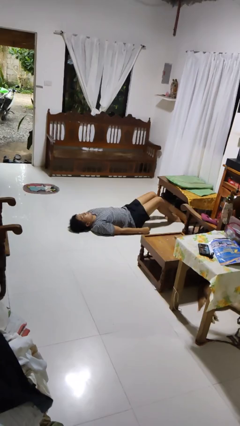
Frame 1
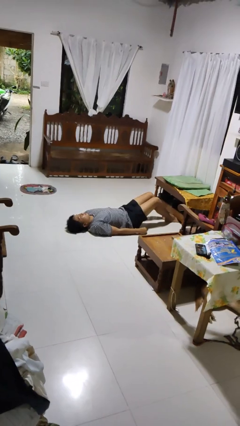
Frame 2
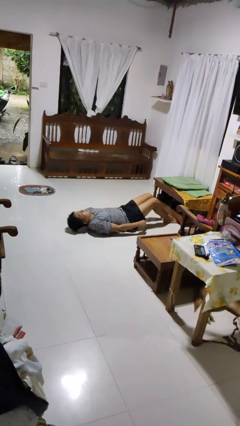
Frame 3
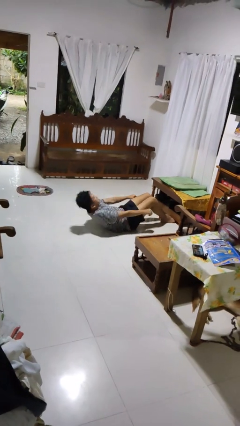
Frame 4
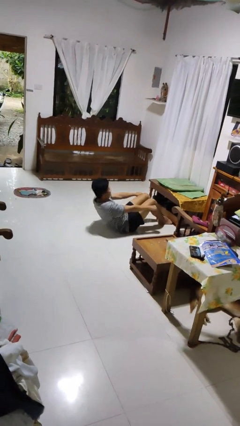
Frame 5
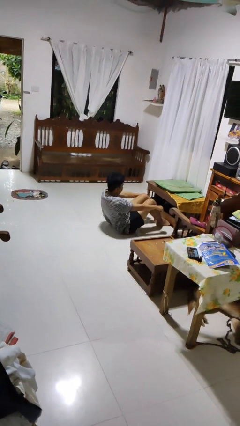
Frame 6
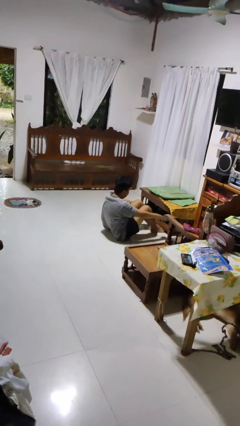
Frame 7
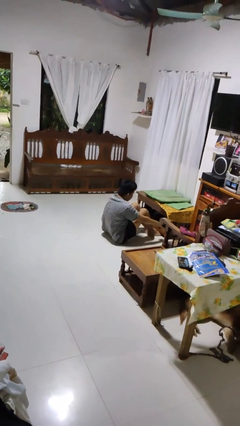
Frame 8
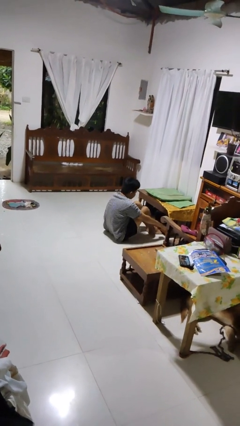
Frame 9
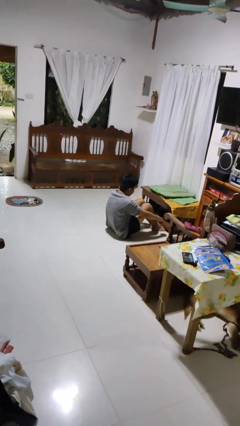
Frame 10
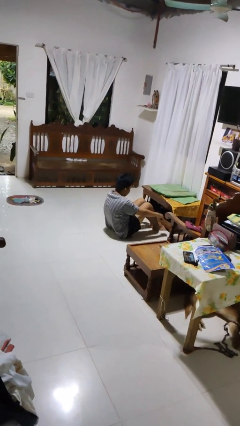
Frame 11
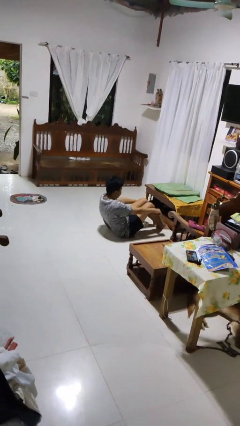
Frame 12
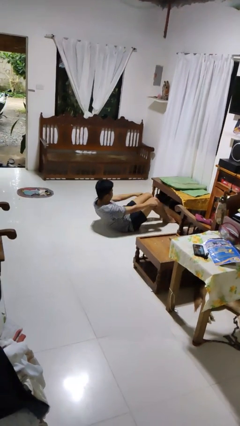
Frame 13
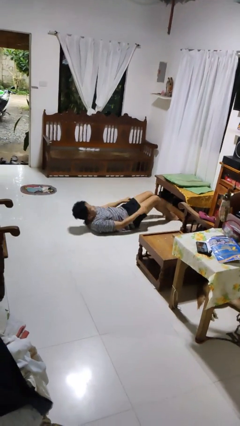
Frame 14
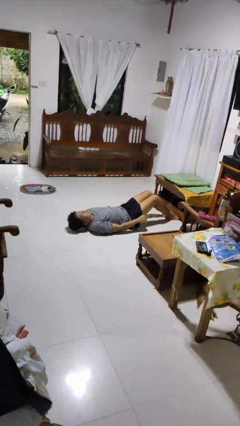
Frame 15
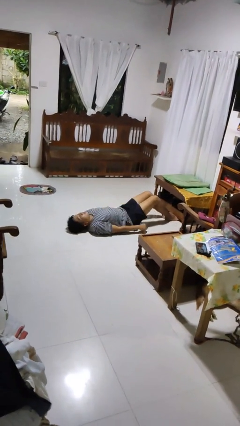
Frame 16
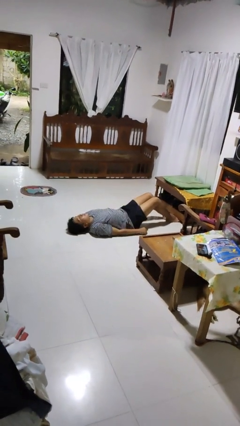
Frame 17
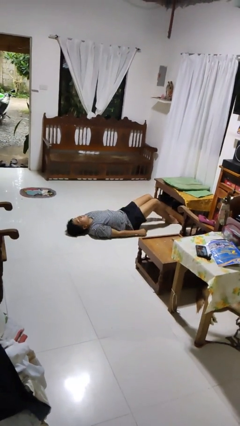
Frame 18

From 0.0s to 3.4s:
person exercises with situp

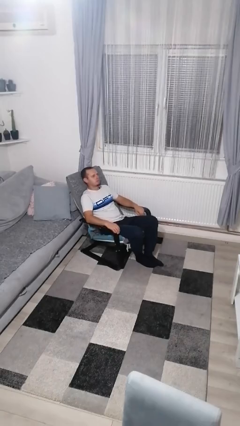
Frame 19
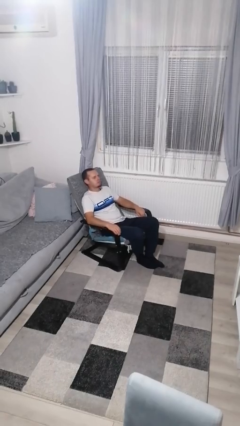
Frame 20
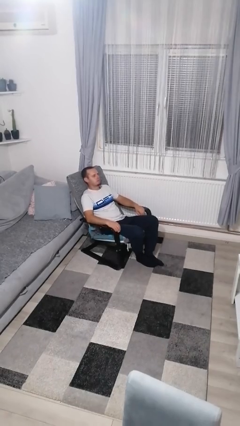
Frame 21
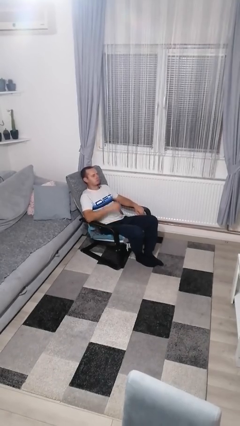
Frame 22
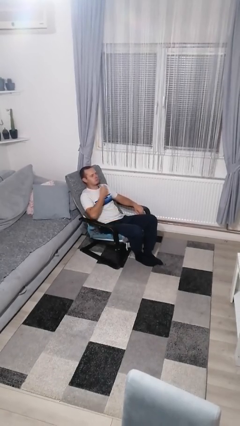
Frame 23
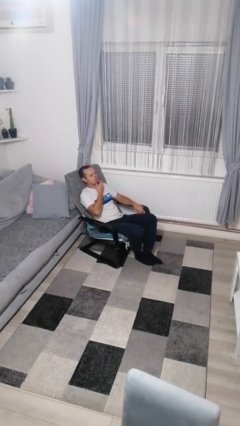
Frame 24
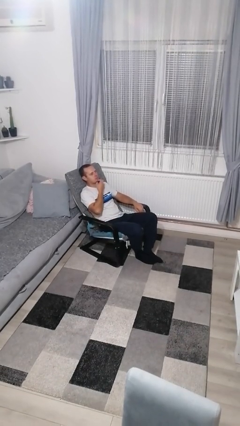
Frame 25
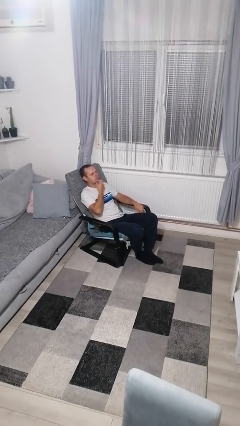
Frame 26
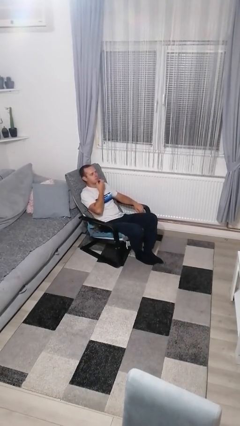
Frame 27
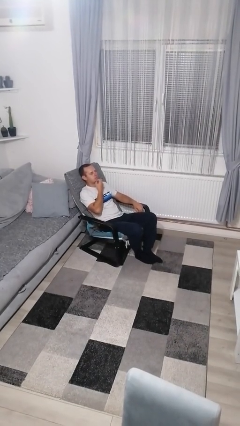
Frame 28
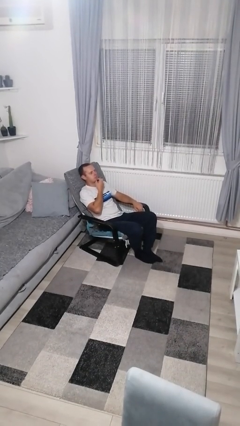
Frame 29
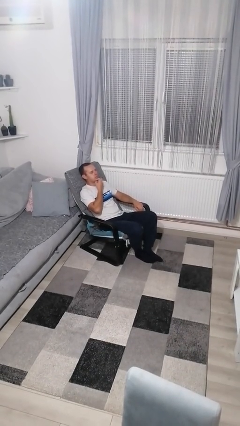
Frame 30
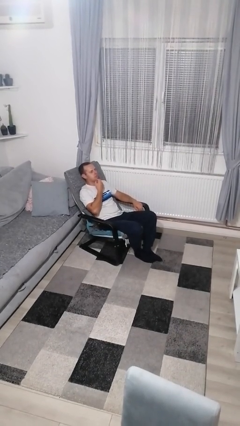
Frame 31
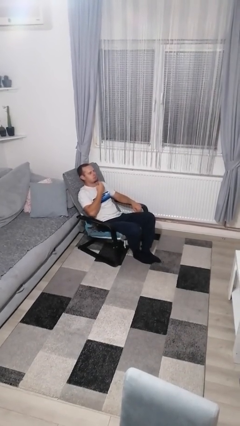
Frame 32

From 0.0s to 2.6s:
person strokes chin

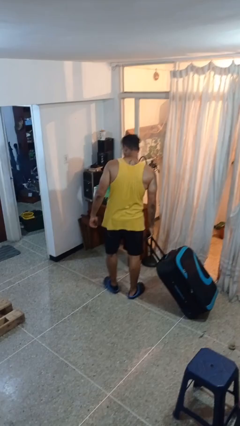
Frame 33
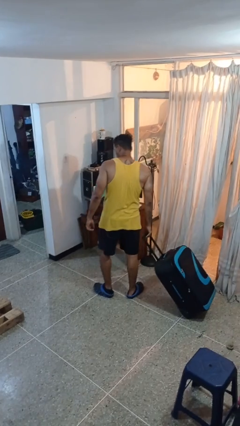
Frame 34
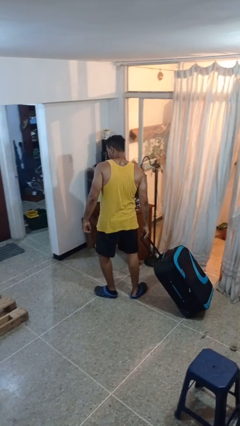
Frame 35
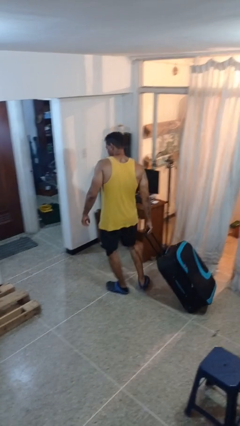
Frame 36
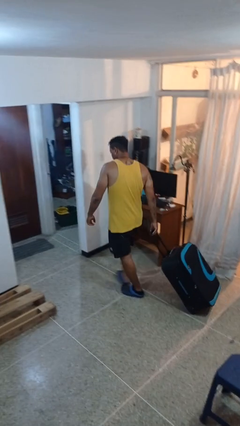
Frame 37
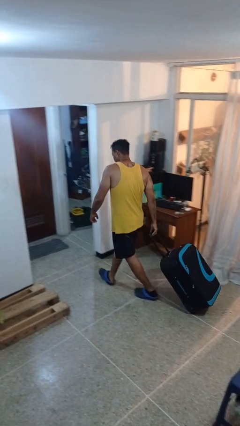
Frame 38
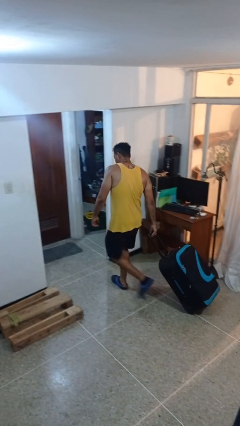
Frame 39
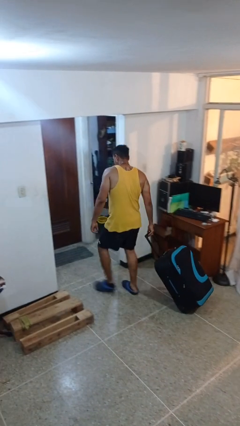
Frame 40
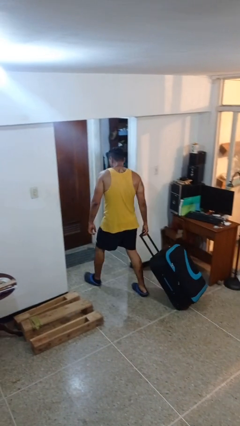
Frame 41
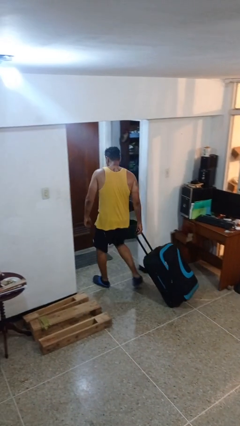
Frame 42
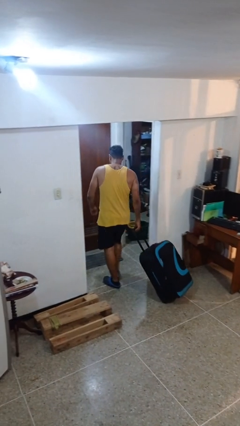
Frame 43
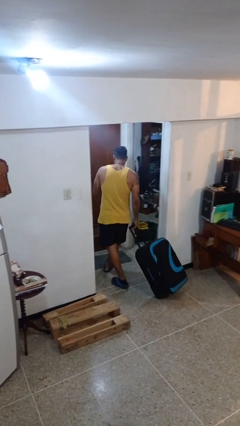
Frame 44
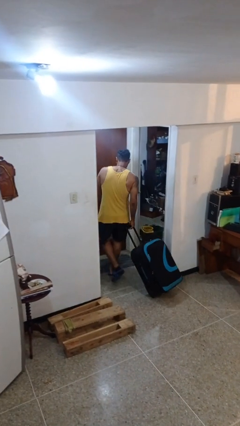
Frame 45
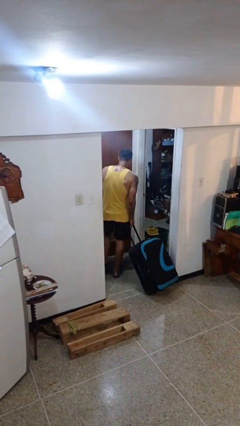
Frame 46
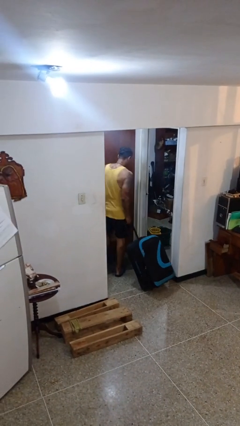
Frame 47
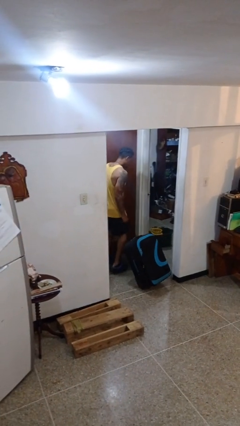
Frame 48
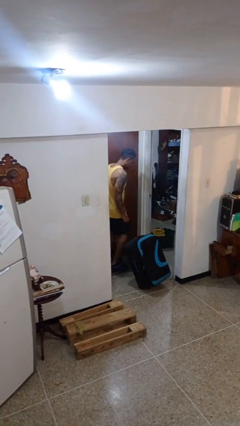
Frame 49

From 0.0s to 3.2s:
person pulls wheeled cart

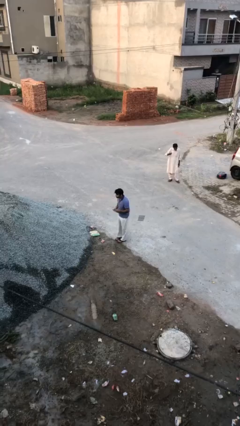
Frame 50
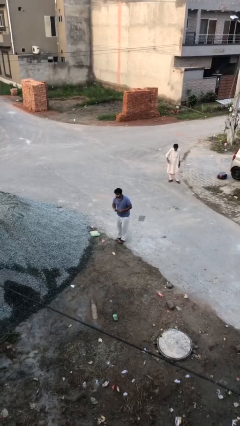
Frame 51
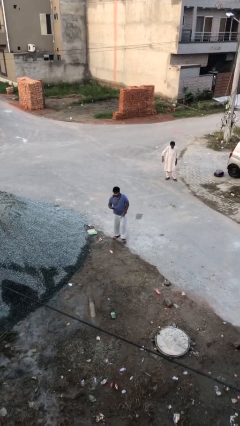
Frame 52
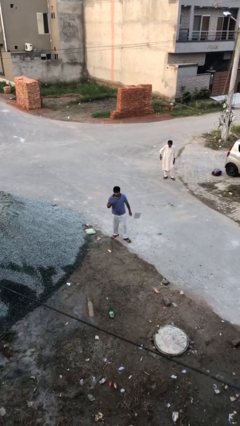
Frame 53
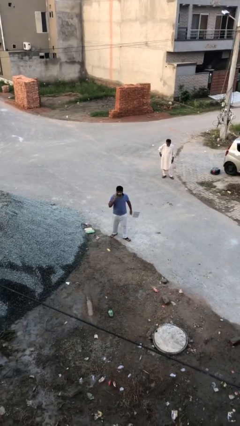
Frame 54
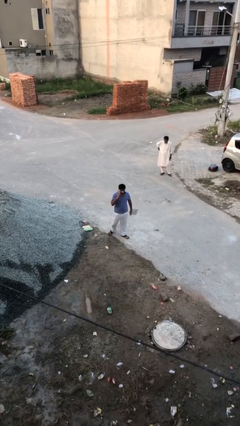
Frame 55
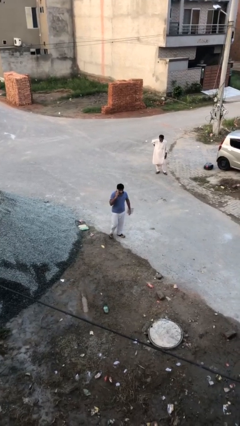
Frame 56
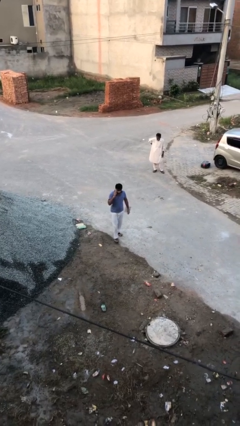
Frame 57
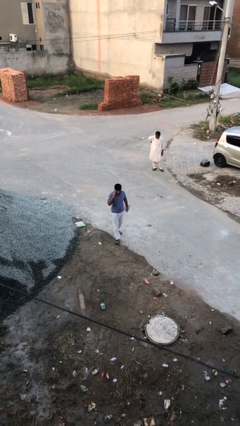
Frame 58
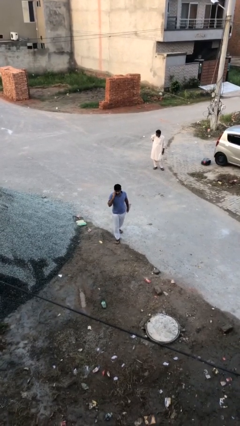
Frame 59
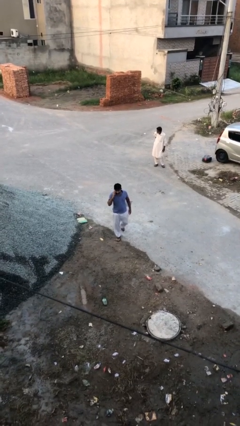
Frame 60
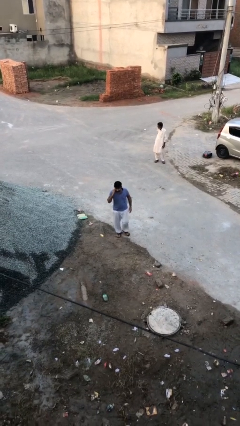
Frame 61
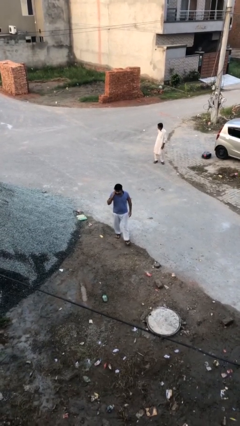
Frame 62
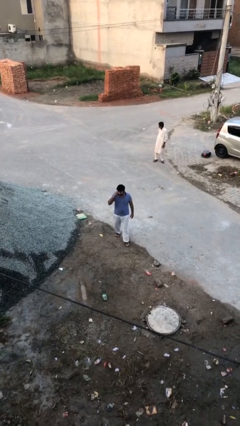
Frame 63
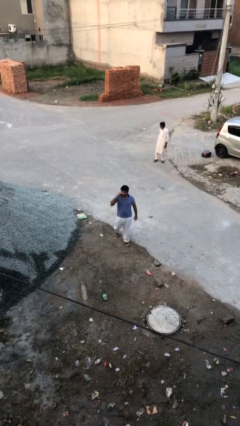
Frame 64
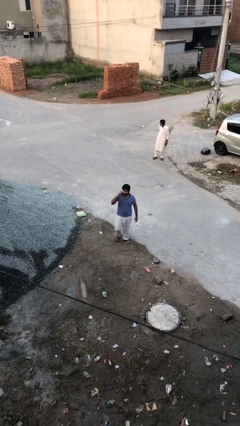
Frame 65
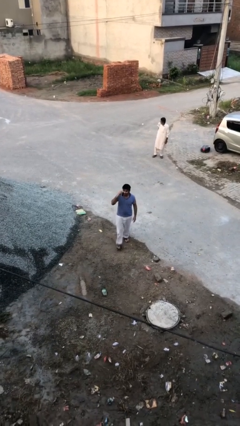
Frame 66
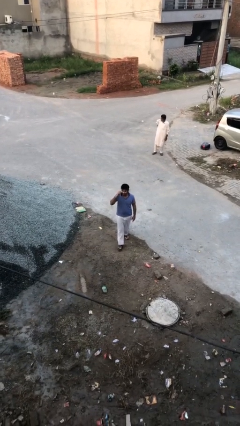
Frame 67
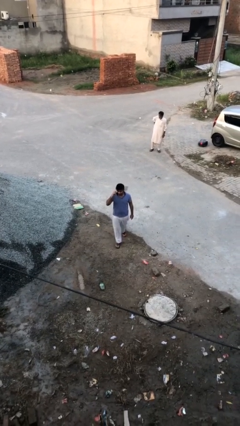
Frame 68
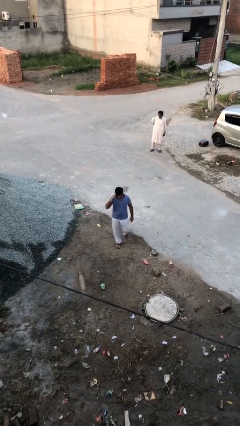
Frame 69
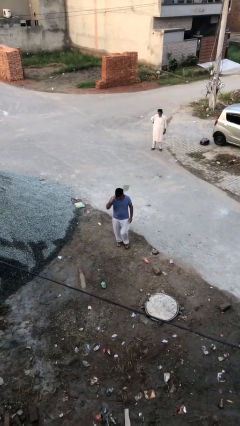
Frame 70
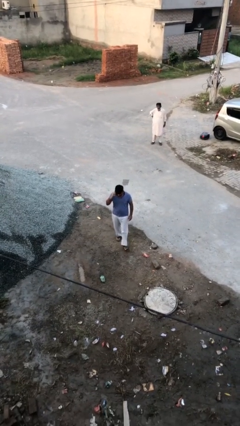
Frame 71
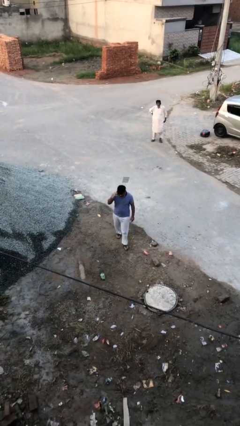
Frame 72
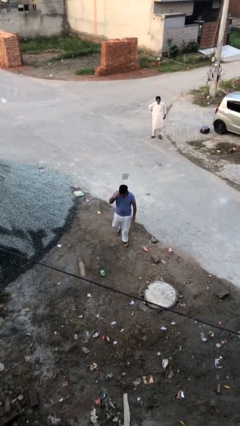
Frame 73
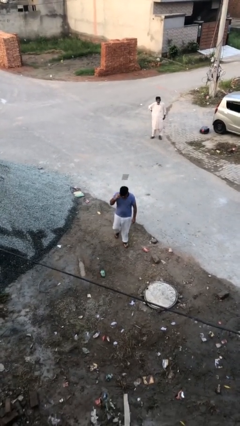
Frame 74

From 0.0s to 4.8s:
person talks on phone

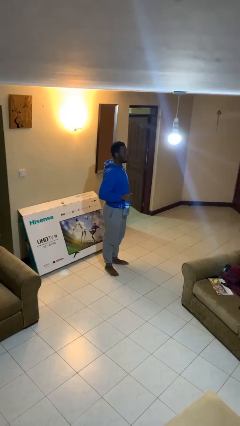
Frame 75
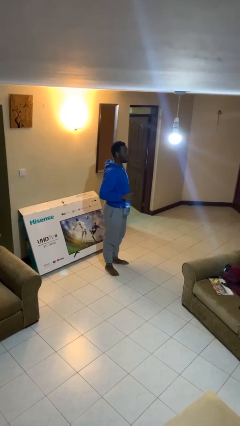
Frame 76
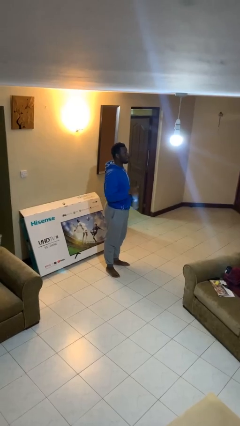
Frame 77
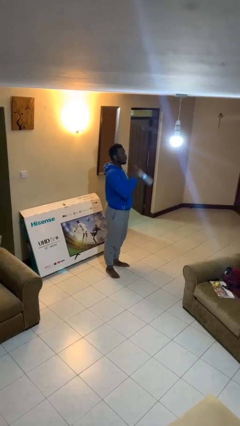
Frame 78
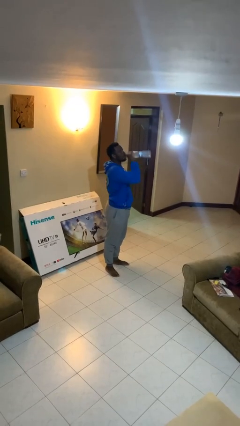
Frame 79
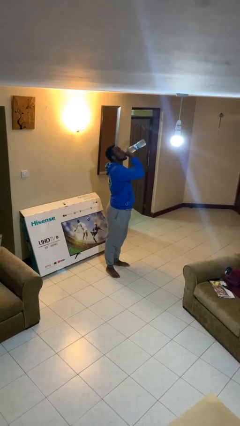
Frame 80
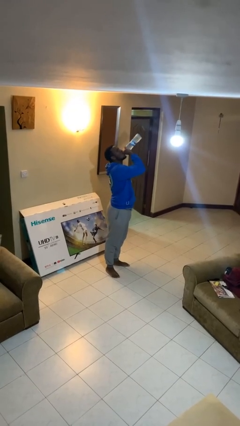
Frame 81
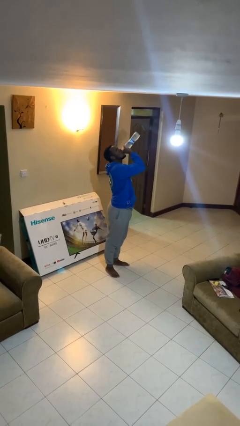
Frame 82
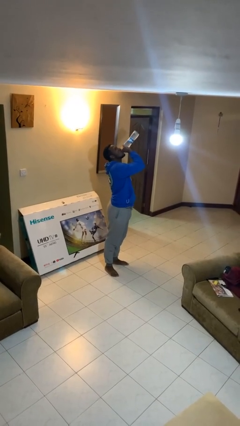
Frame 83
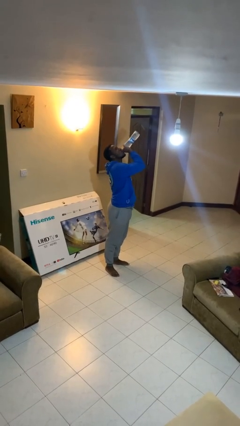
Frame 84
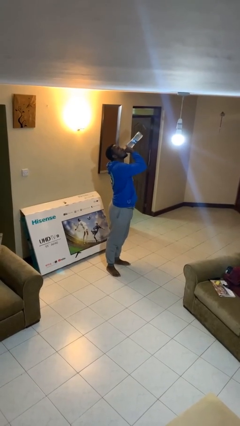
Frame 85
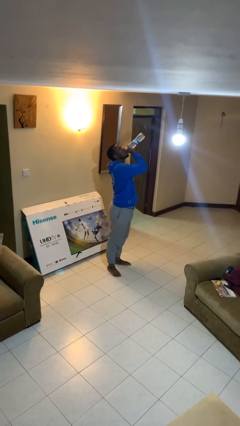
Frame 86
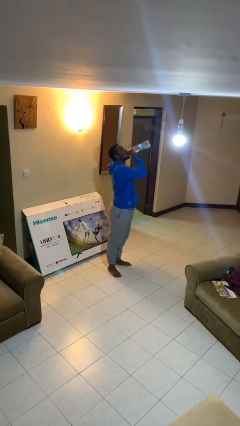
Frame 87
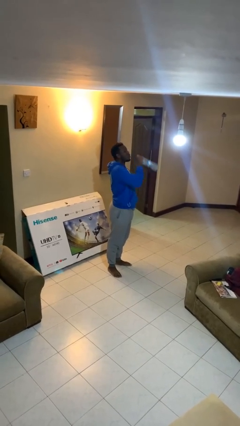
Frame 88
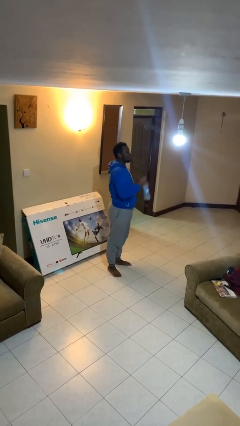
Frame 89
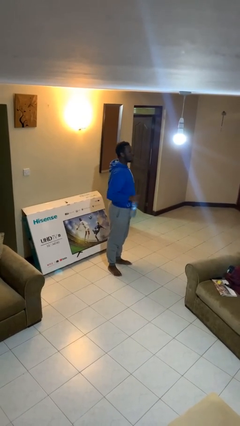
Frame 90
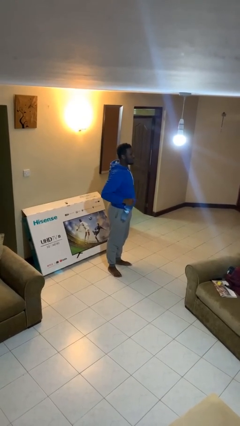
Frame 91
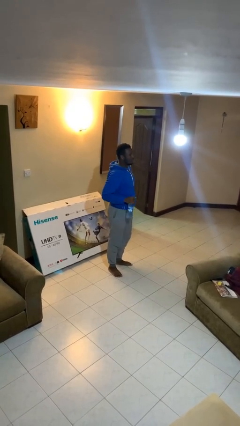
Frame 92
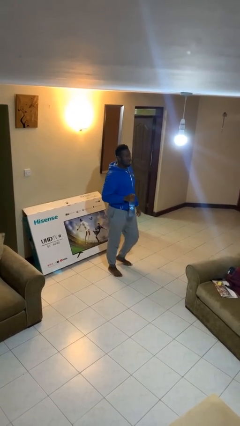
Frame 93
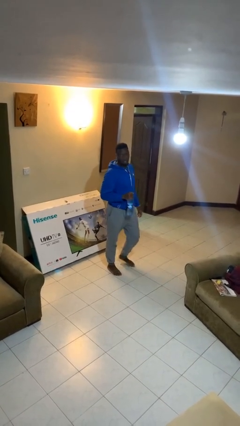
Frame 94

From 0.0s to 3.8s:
person drinks from bottle
